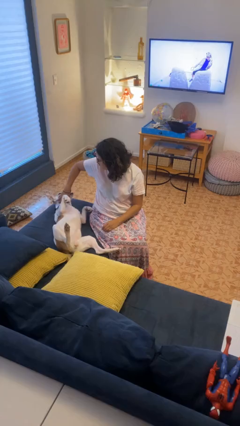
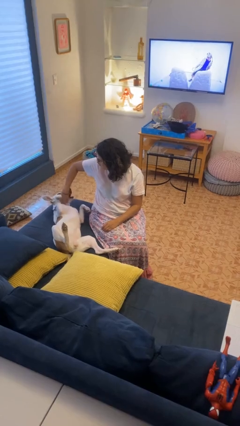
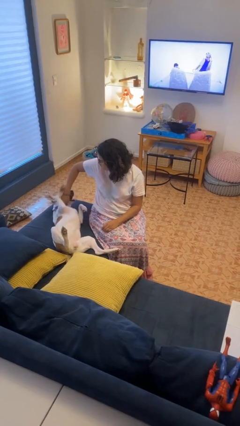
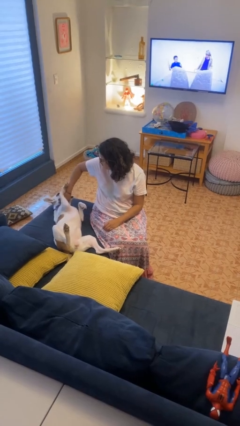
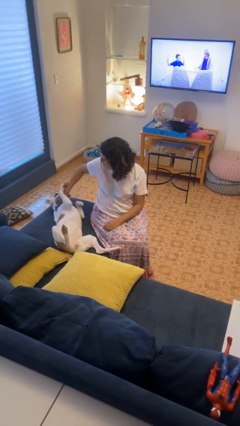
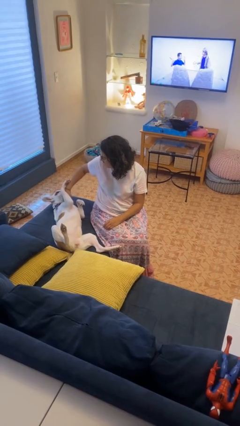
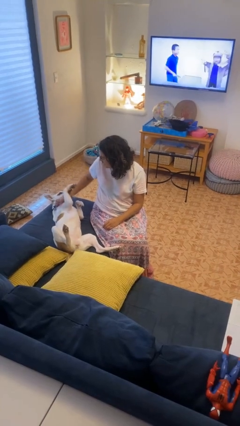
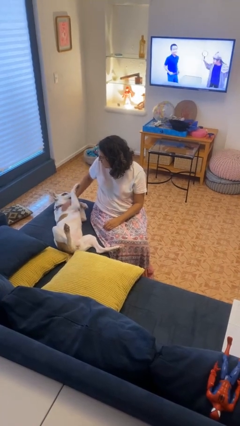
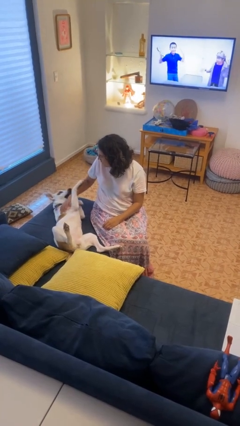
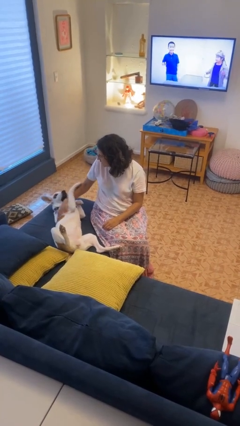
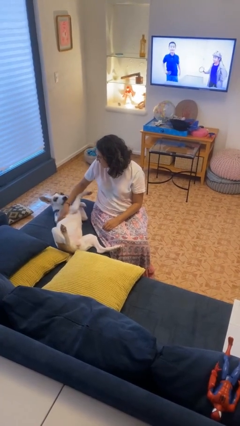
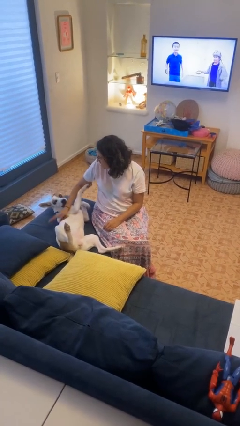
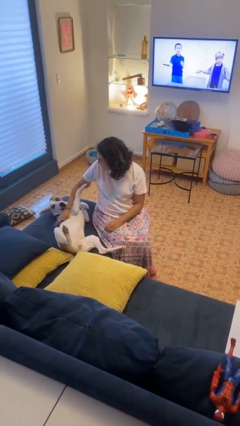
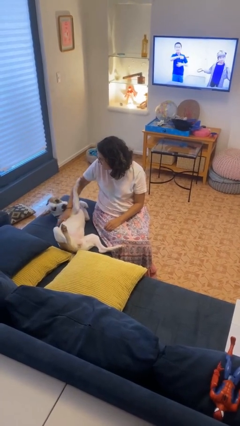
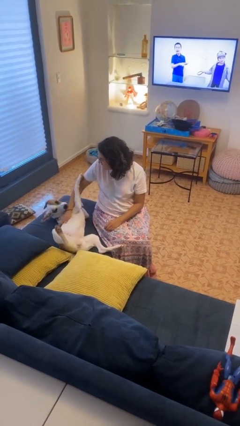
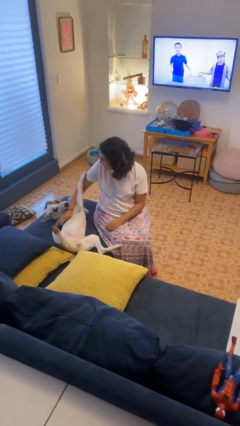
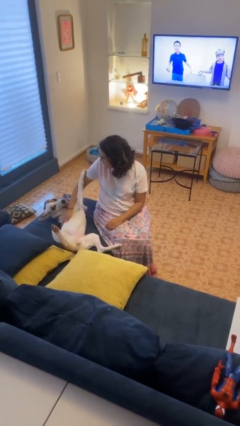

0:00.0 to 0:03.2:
person pets dog

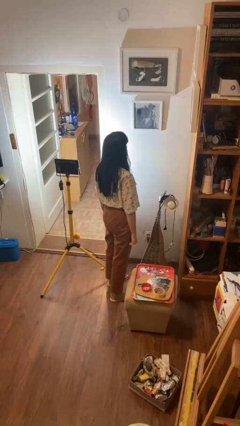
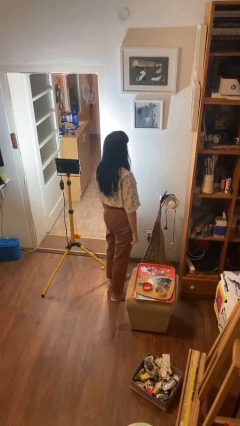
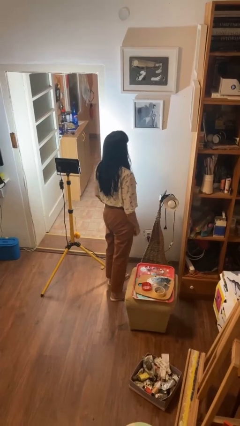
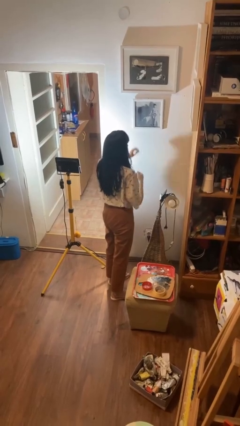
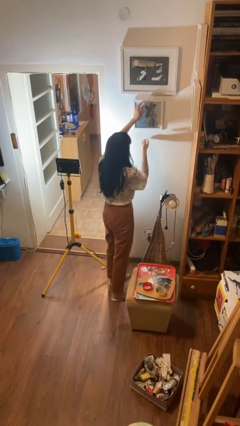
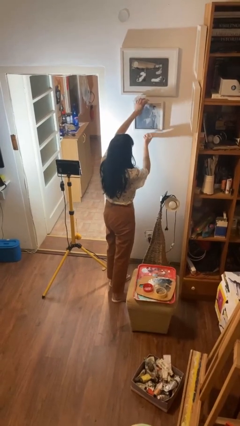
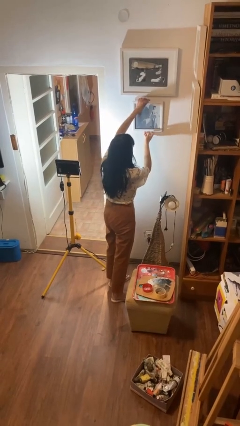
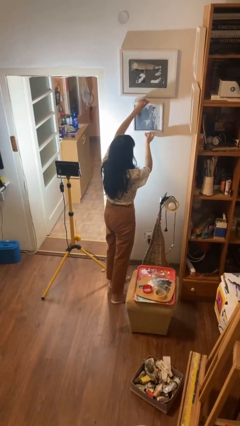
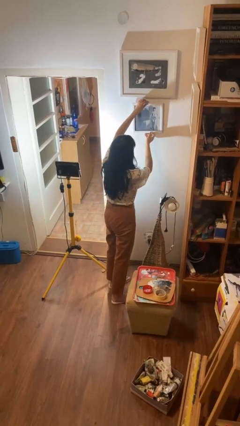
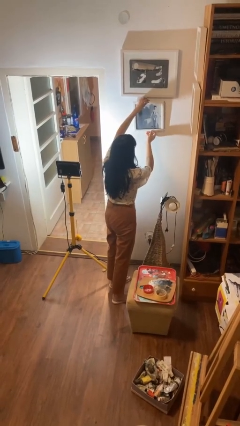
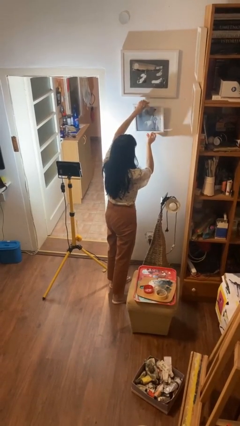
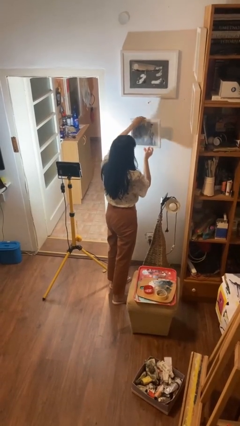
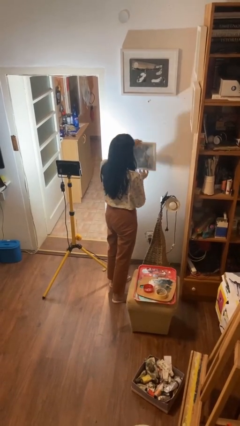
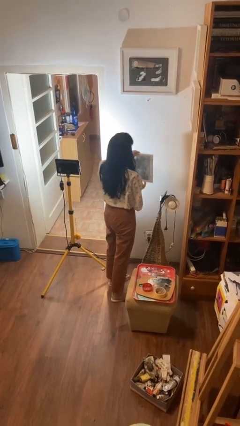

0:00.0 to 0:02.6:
person takes down picture frame

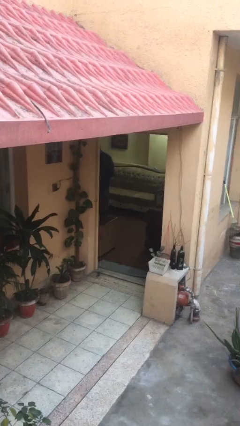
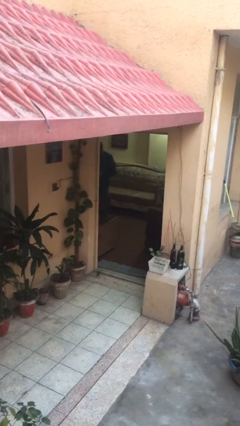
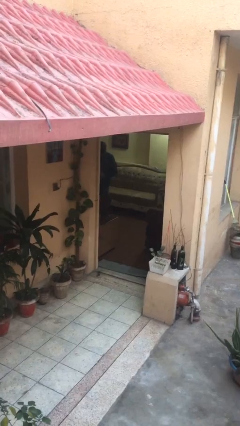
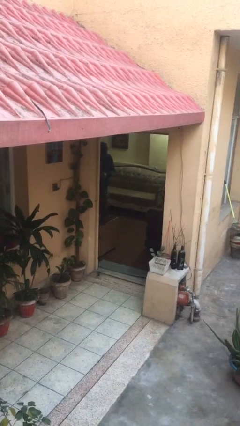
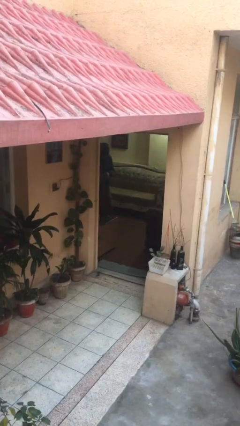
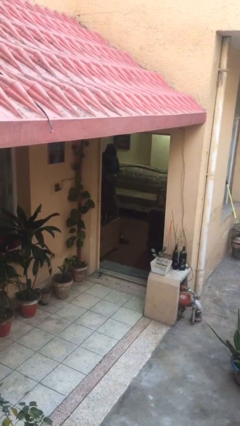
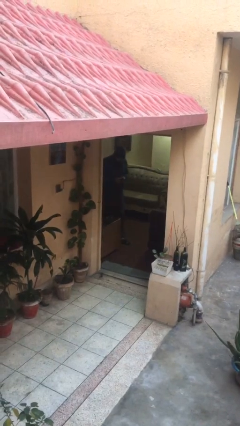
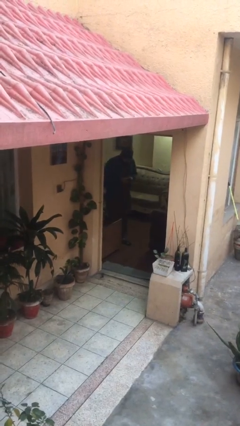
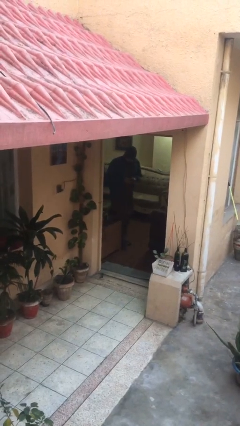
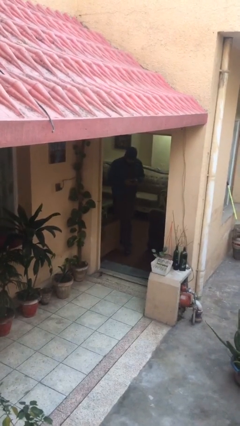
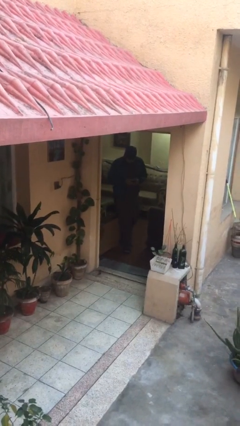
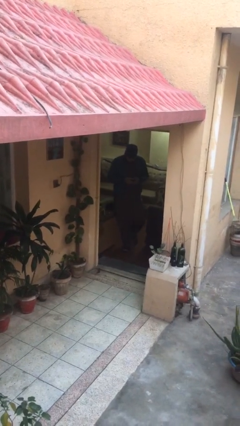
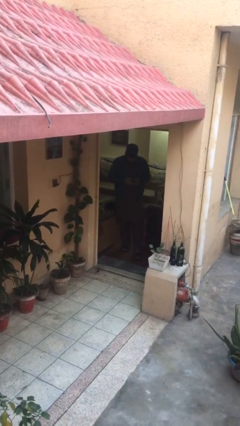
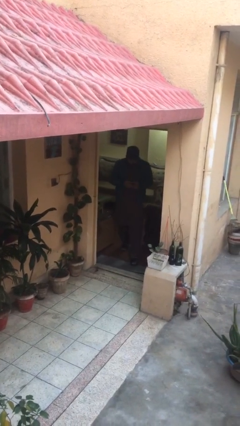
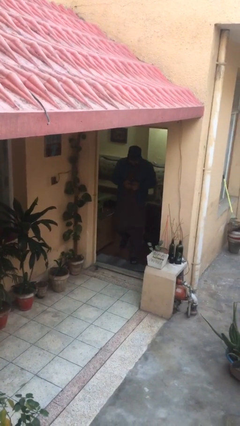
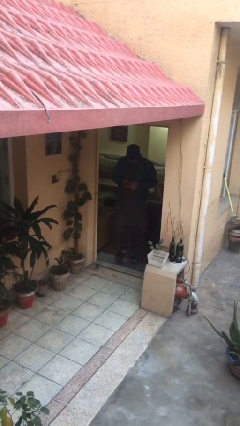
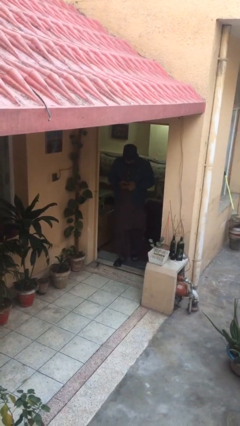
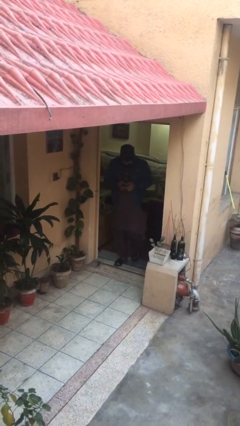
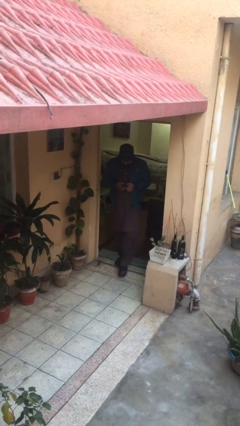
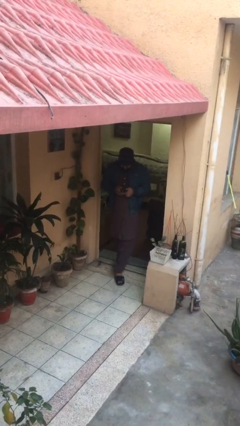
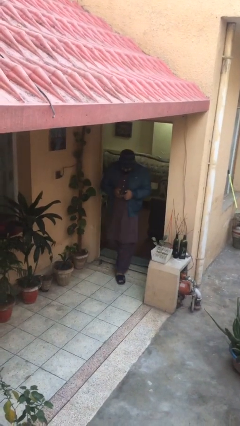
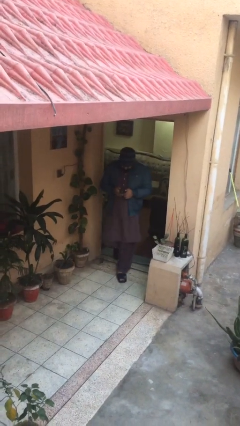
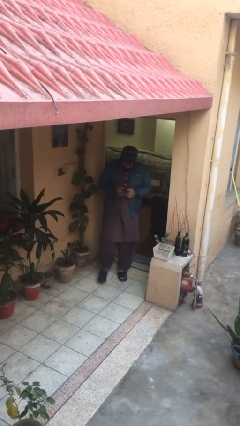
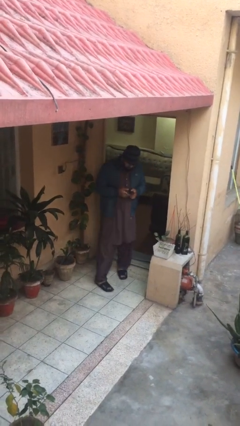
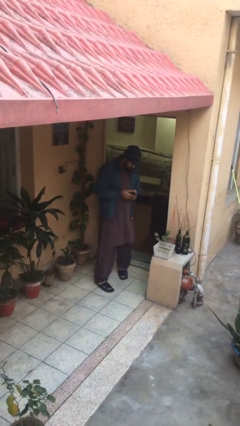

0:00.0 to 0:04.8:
person enters scene through structure

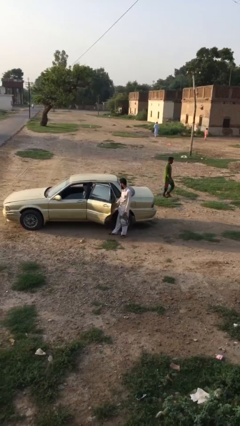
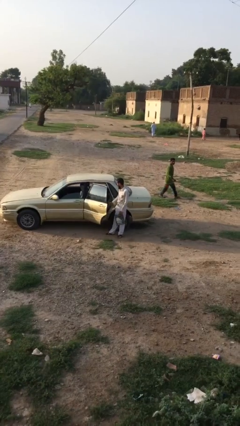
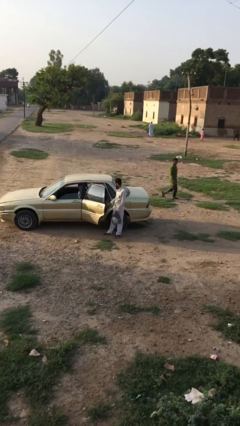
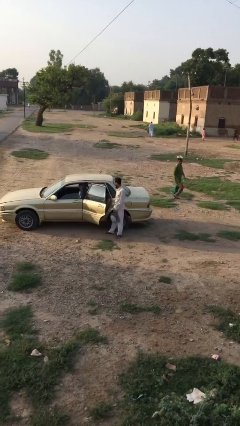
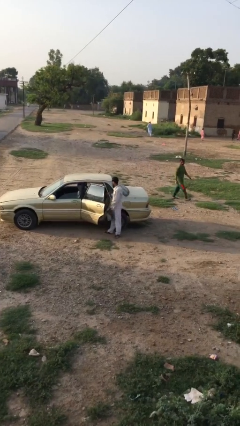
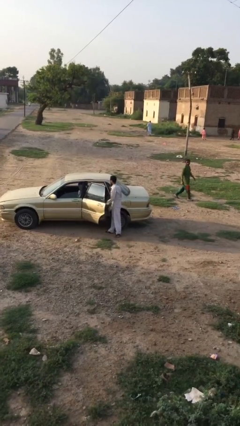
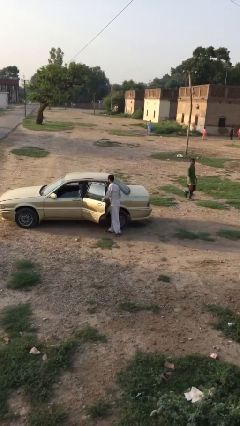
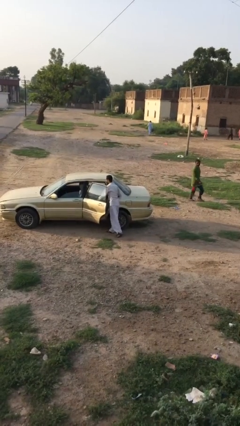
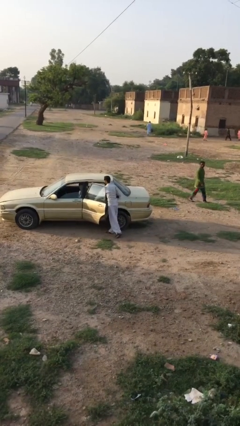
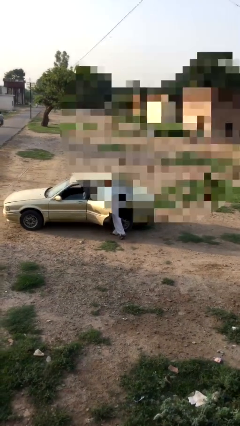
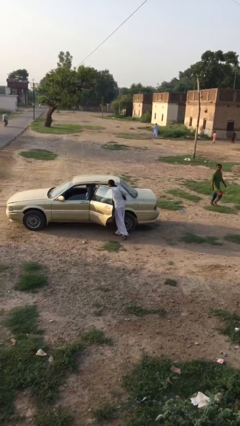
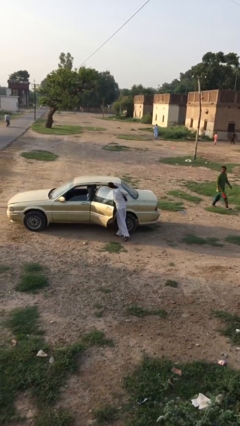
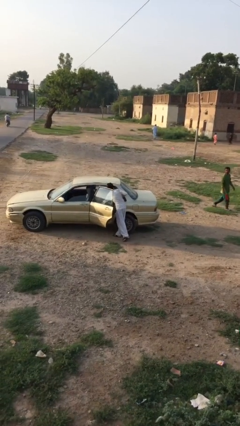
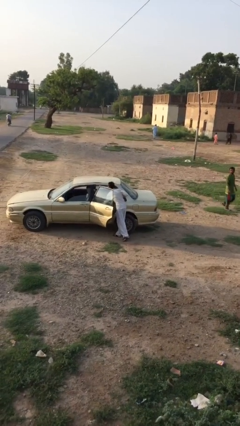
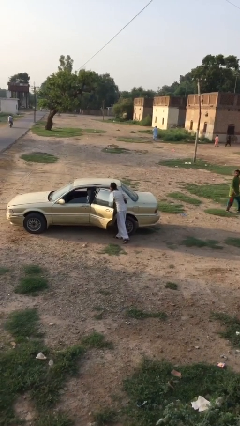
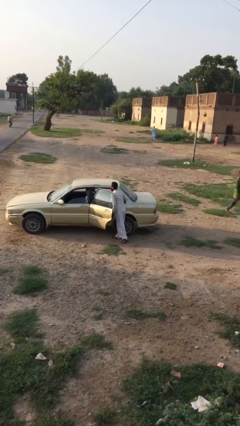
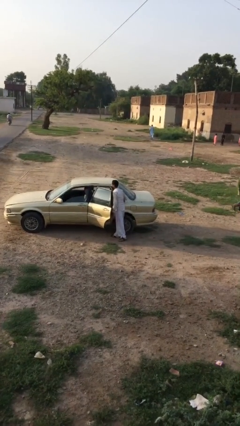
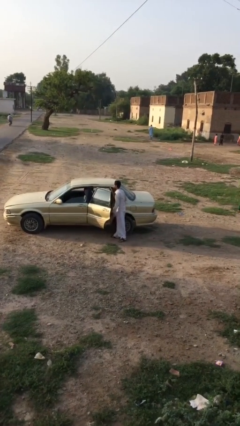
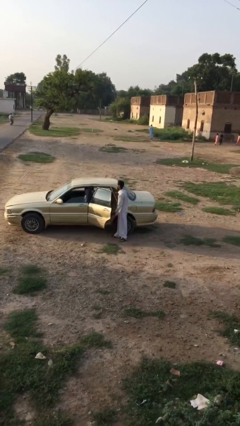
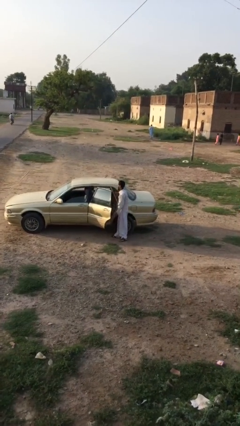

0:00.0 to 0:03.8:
person loads car

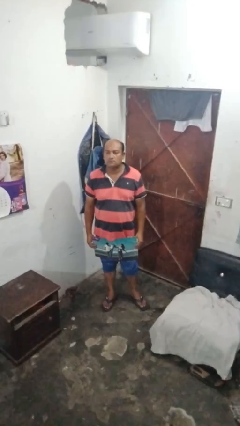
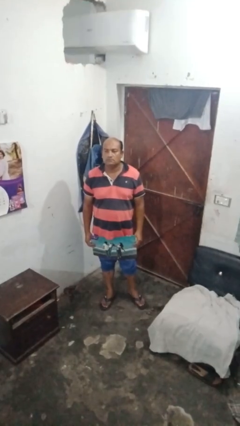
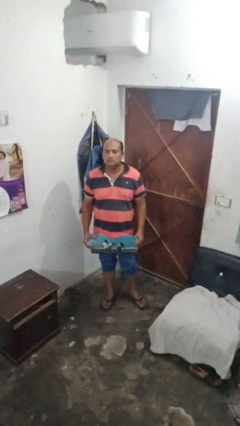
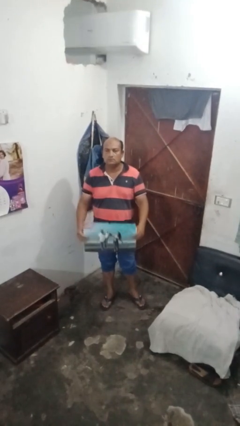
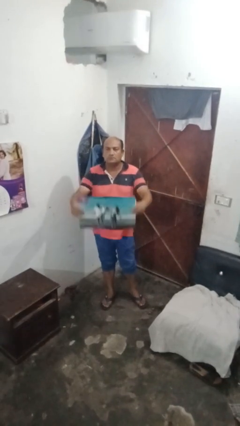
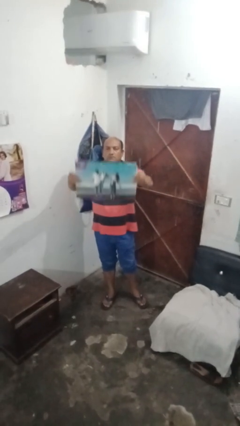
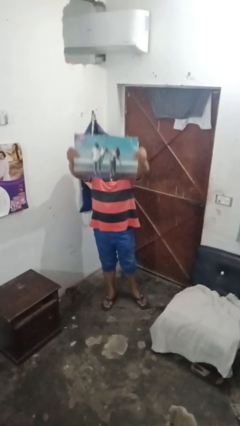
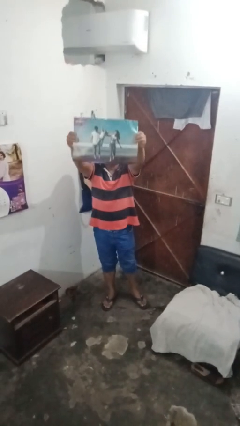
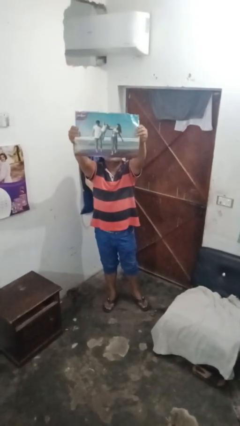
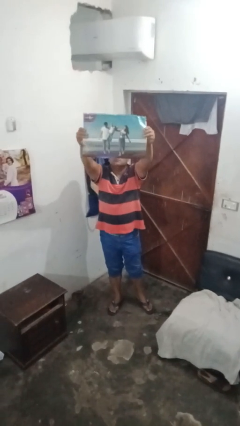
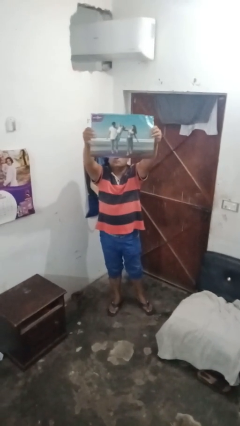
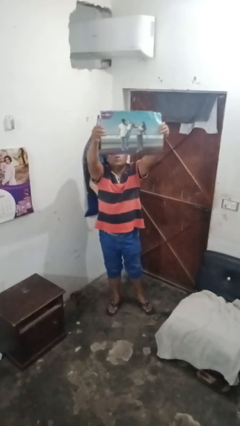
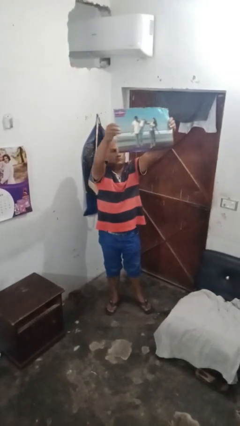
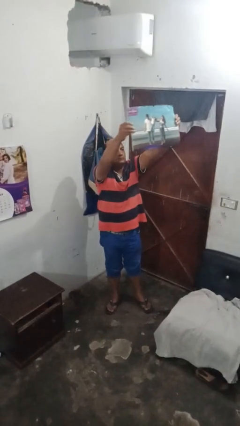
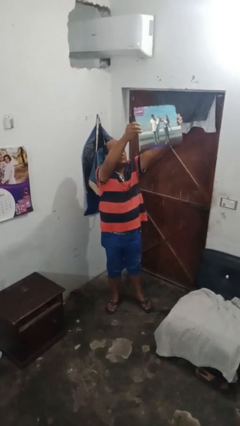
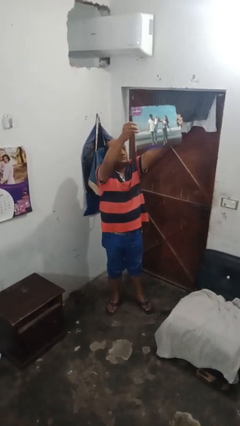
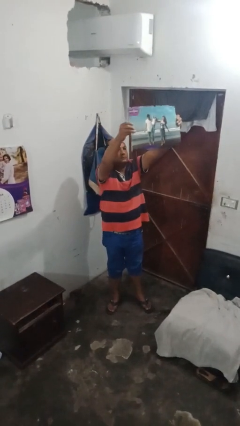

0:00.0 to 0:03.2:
person holds object above head
